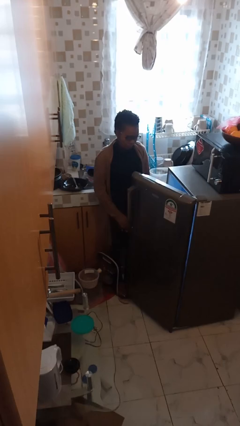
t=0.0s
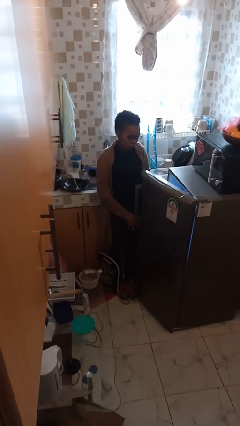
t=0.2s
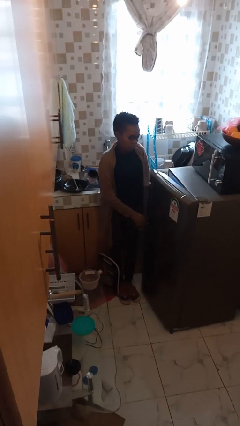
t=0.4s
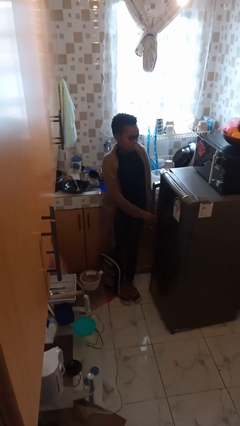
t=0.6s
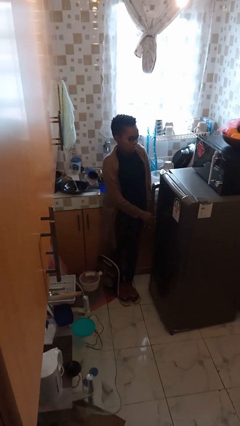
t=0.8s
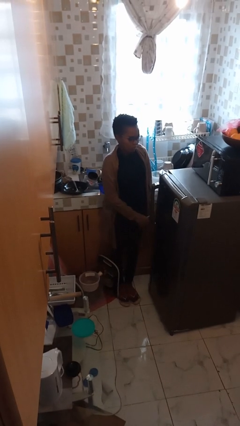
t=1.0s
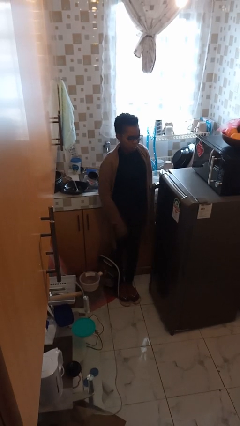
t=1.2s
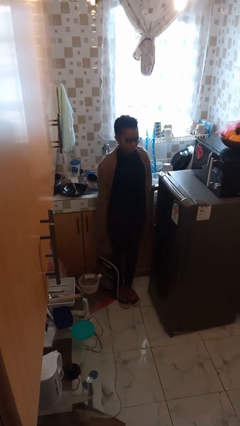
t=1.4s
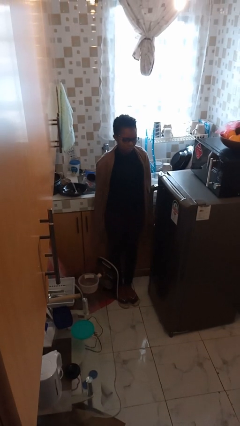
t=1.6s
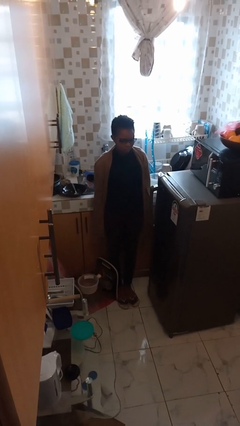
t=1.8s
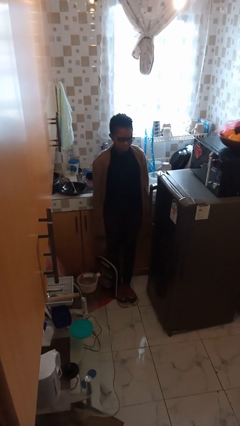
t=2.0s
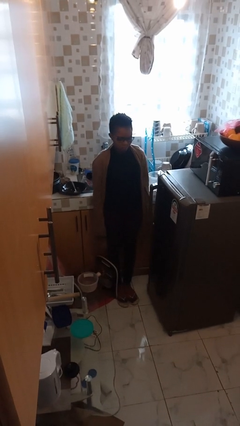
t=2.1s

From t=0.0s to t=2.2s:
person closes refrigerator

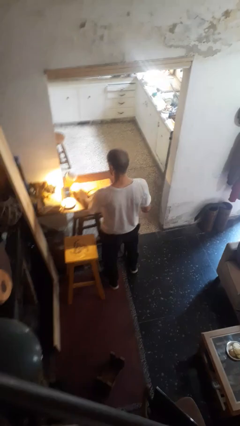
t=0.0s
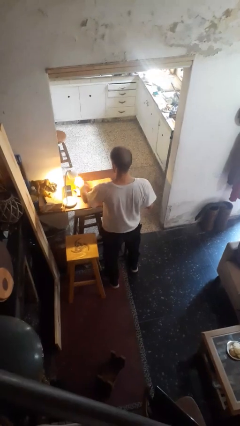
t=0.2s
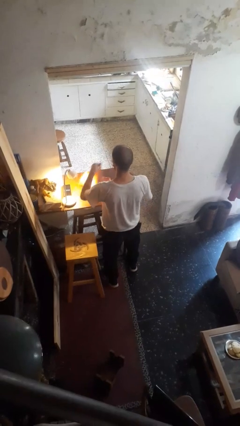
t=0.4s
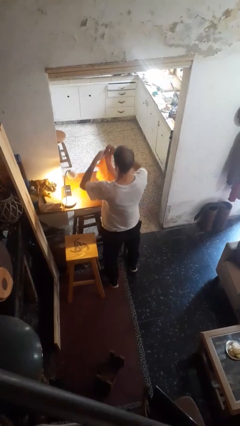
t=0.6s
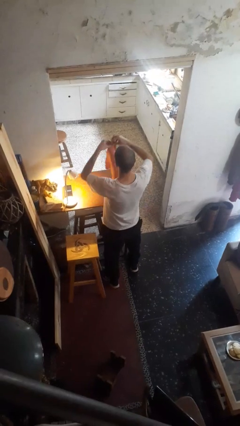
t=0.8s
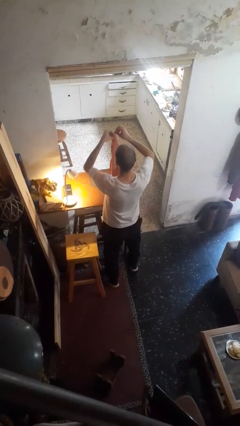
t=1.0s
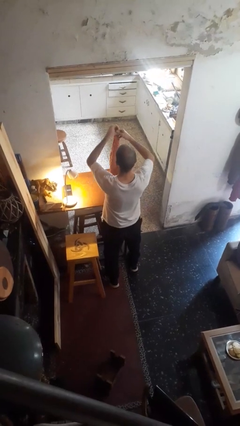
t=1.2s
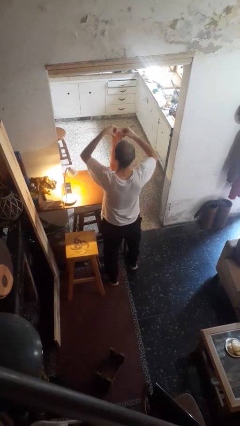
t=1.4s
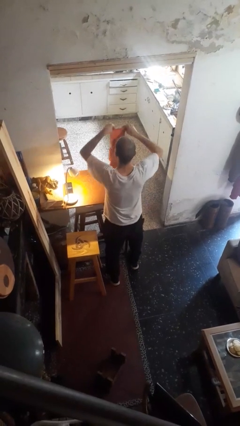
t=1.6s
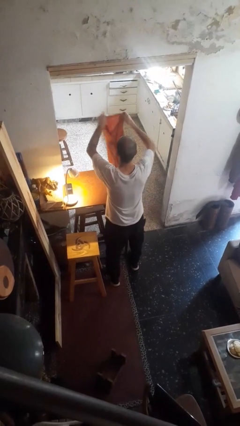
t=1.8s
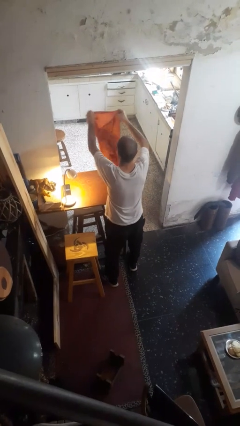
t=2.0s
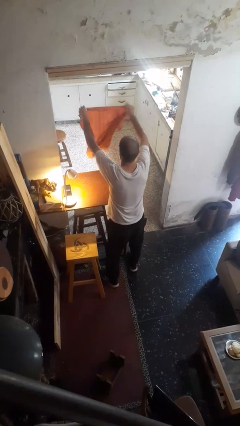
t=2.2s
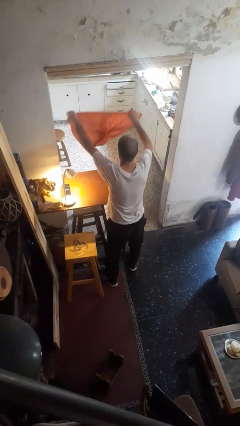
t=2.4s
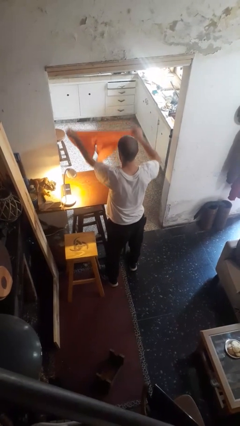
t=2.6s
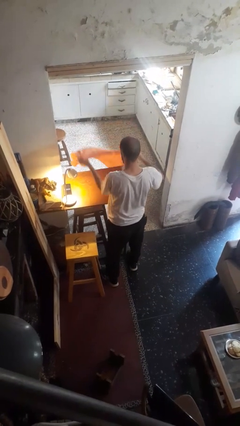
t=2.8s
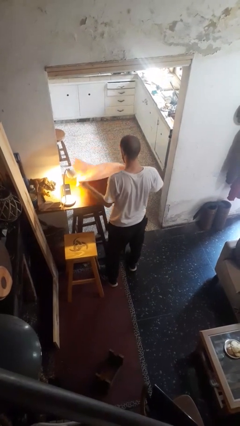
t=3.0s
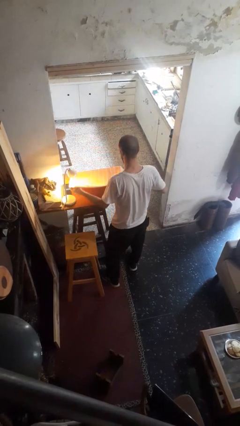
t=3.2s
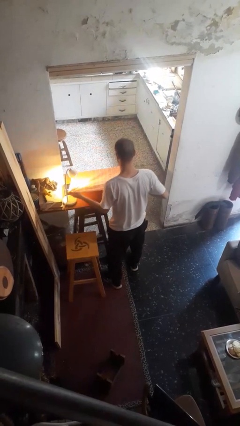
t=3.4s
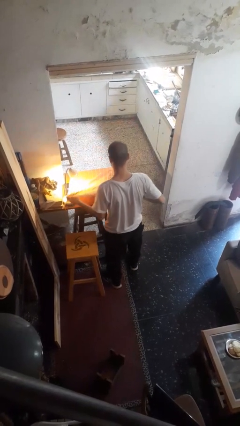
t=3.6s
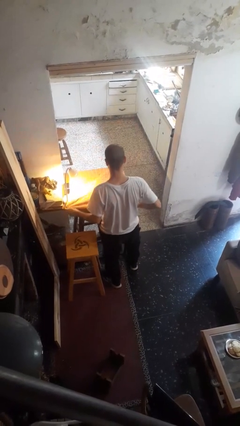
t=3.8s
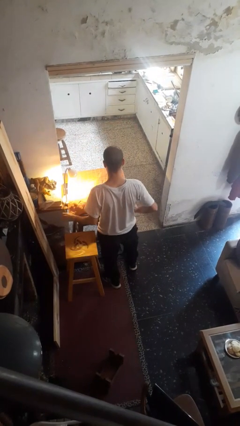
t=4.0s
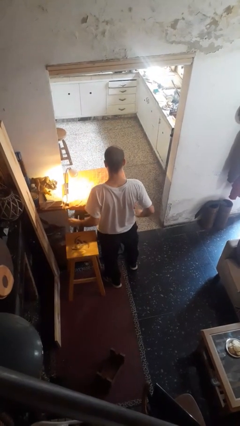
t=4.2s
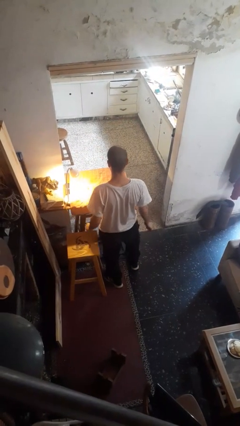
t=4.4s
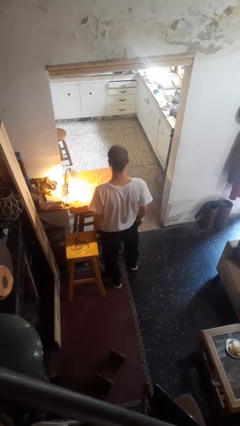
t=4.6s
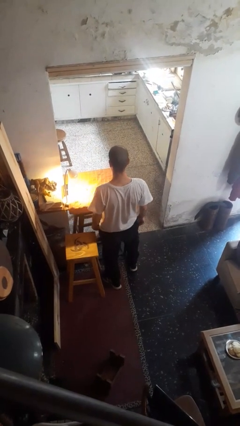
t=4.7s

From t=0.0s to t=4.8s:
person spreads tablecloth

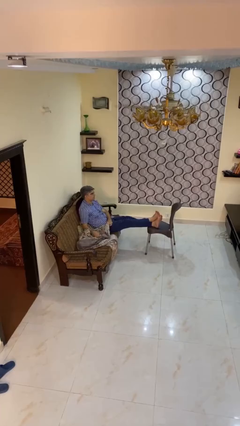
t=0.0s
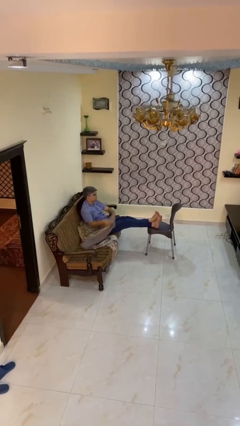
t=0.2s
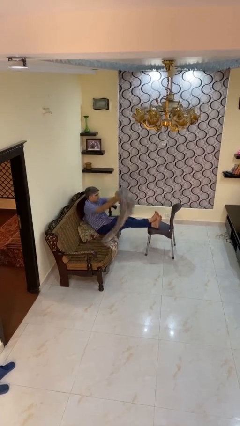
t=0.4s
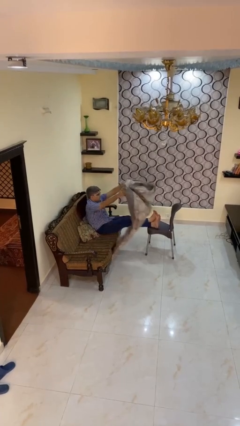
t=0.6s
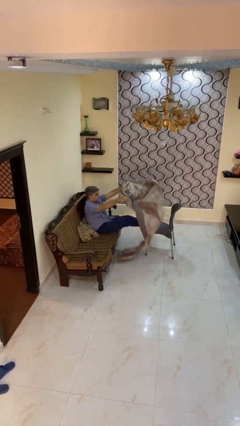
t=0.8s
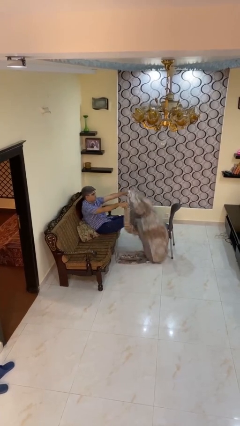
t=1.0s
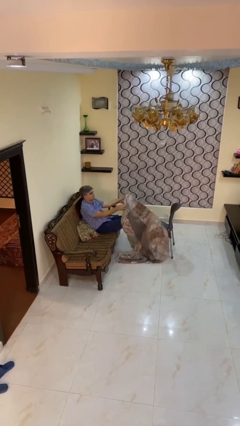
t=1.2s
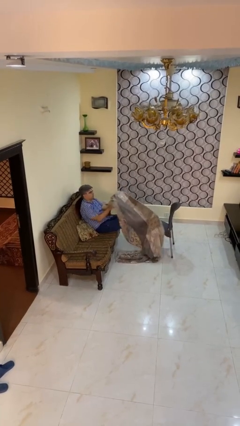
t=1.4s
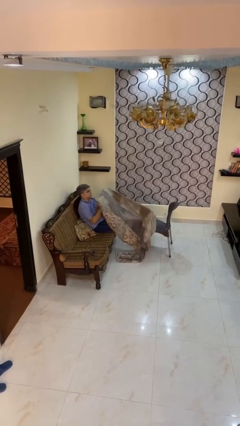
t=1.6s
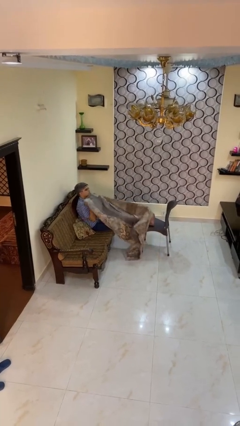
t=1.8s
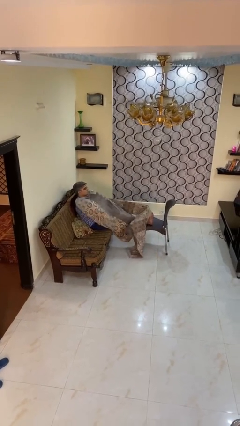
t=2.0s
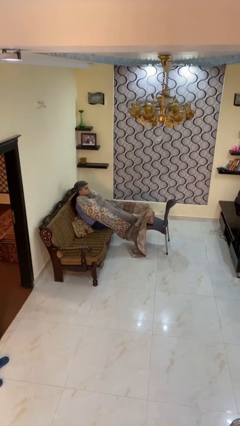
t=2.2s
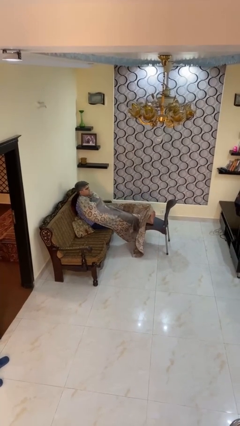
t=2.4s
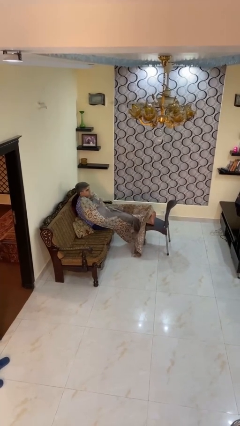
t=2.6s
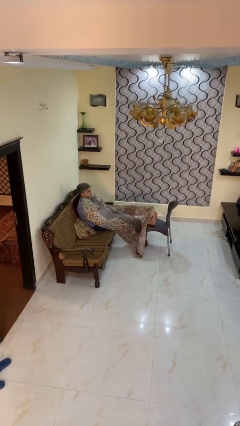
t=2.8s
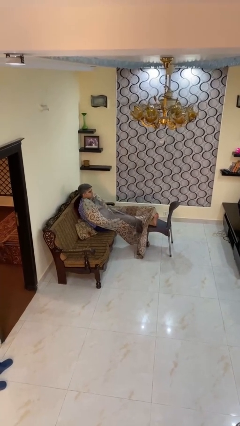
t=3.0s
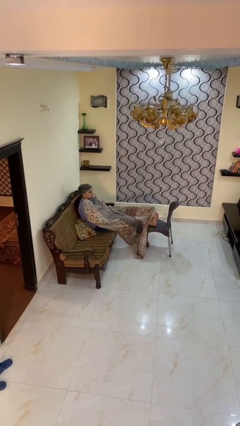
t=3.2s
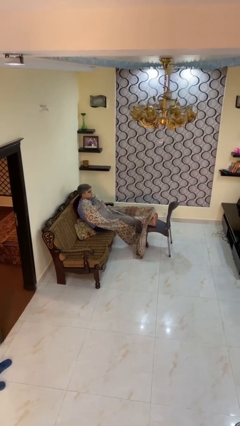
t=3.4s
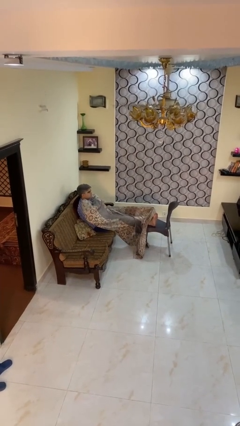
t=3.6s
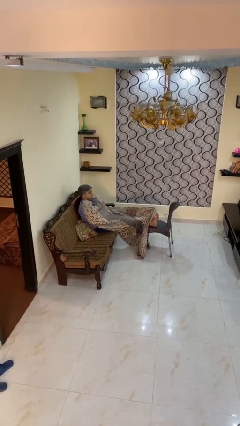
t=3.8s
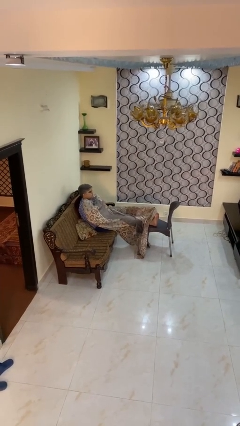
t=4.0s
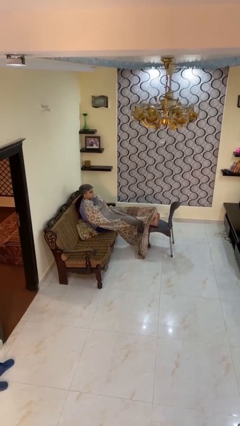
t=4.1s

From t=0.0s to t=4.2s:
person covers with blanket

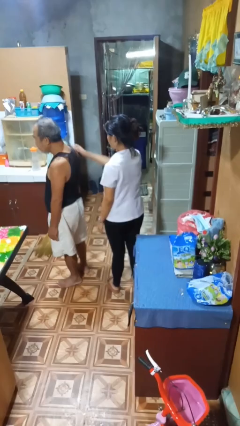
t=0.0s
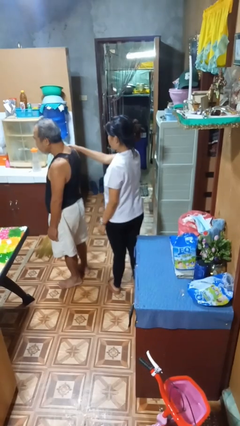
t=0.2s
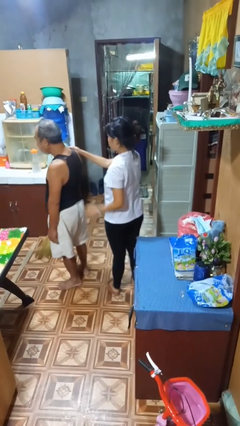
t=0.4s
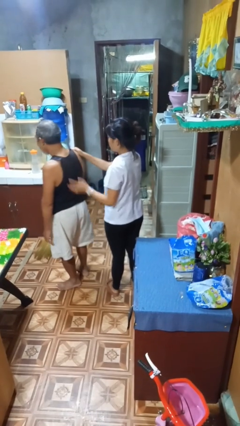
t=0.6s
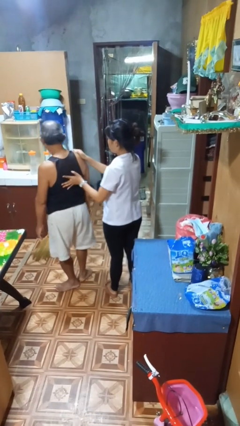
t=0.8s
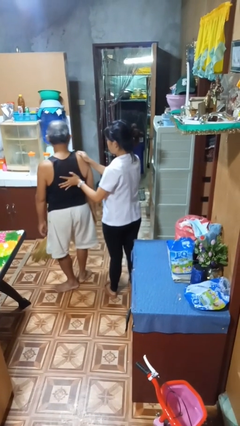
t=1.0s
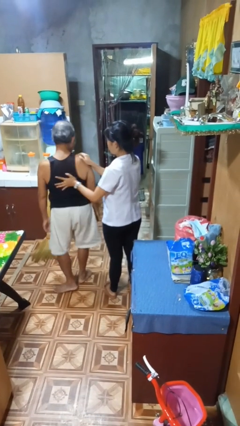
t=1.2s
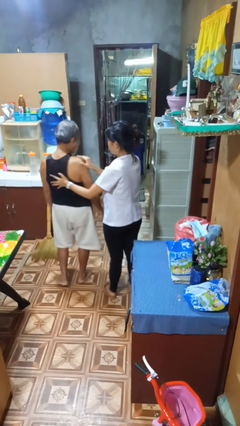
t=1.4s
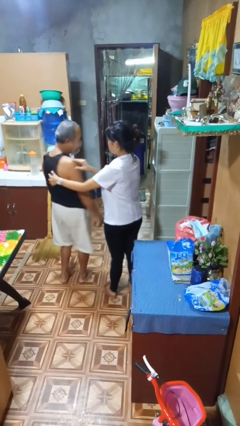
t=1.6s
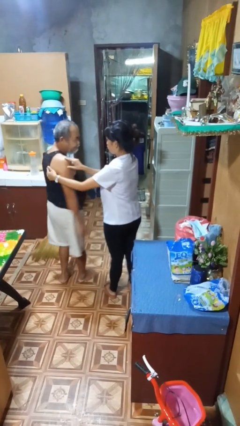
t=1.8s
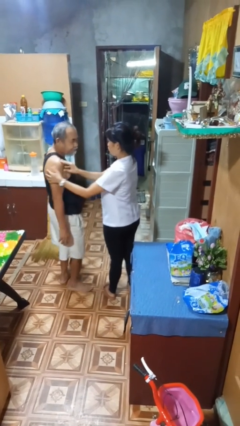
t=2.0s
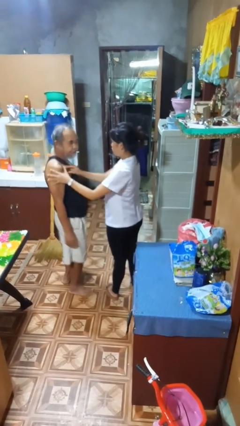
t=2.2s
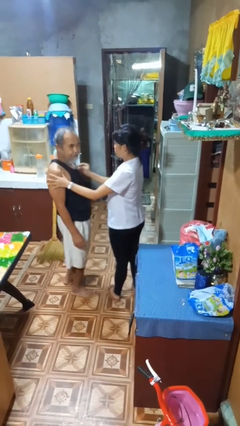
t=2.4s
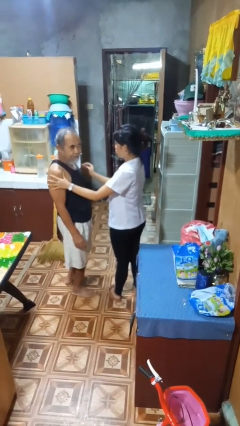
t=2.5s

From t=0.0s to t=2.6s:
person grabs person by shoulder

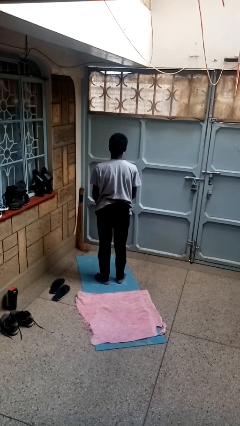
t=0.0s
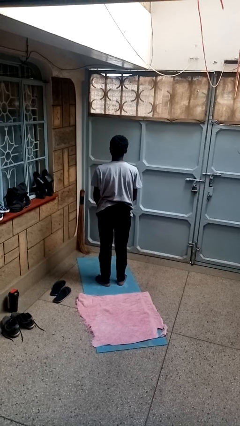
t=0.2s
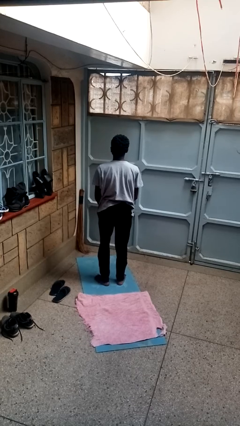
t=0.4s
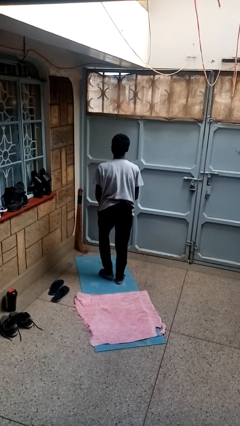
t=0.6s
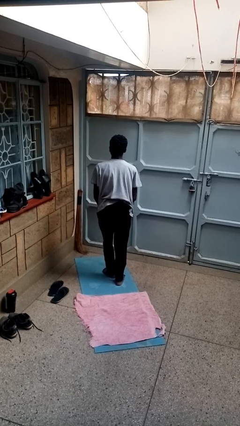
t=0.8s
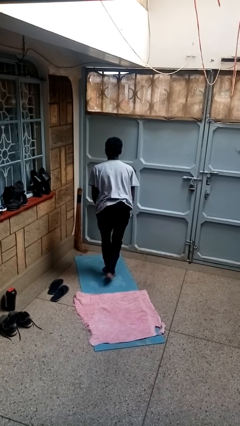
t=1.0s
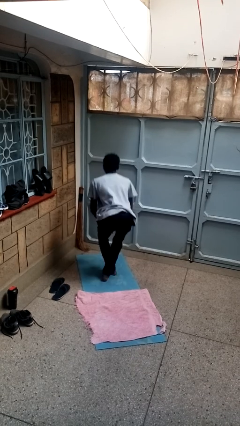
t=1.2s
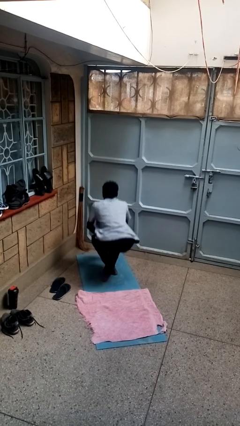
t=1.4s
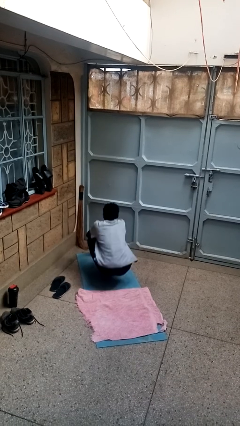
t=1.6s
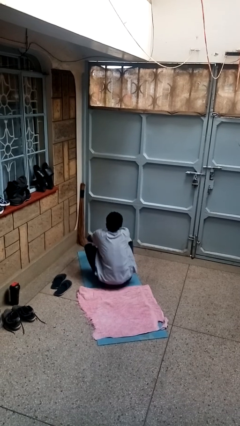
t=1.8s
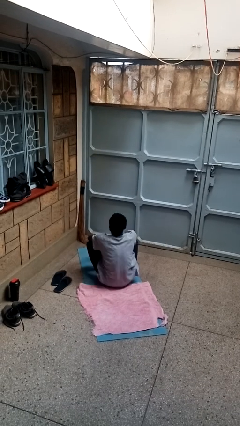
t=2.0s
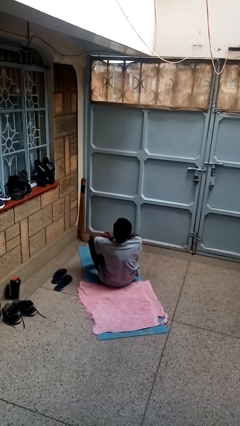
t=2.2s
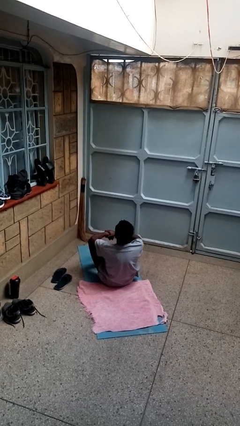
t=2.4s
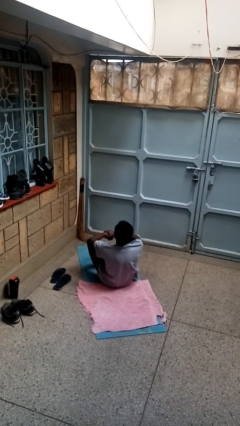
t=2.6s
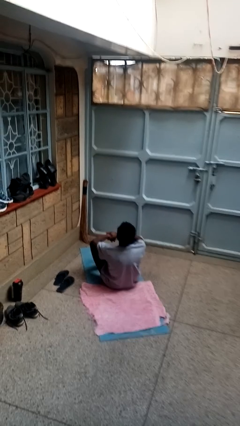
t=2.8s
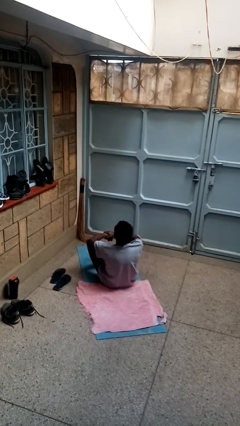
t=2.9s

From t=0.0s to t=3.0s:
person sits crisscross

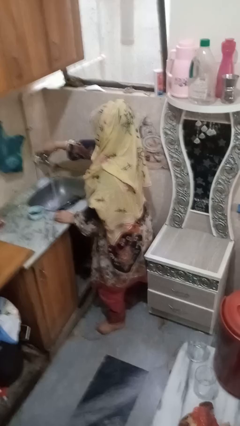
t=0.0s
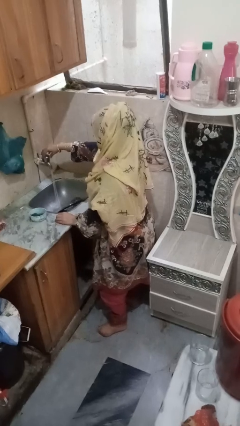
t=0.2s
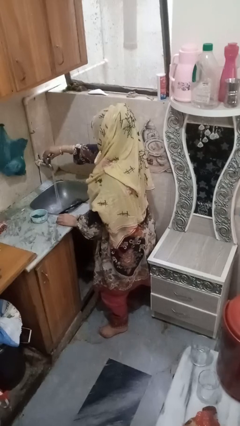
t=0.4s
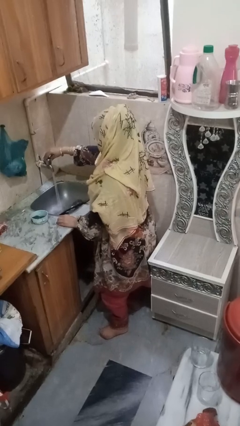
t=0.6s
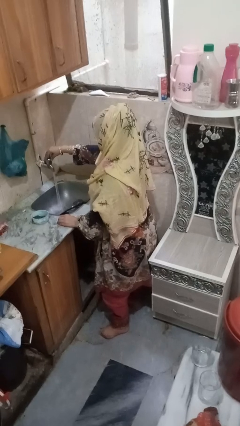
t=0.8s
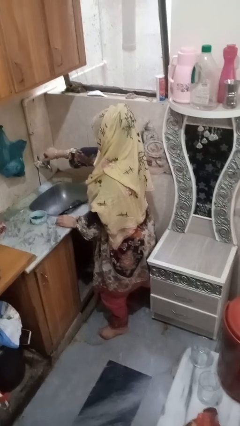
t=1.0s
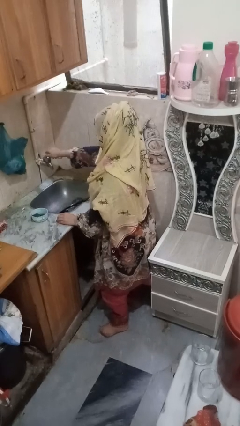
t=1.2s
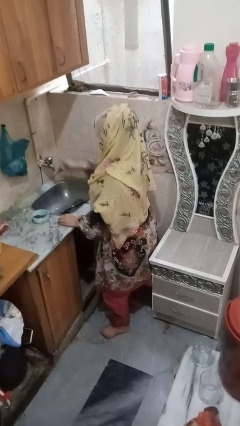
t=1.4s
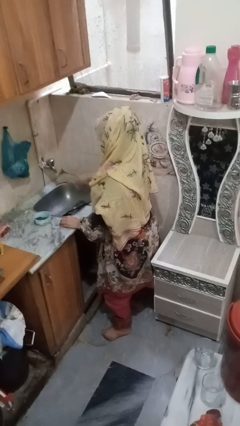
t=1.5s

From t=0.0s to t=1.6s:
person turns off faucet
